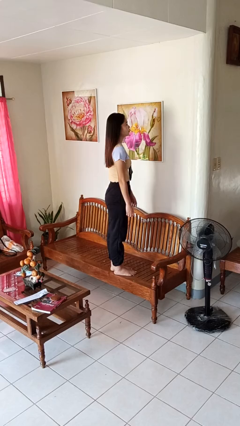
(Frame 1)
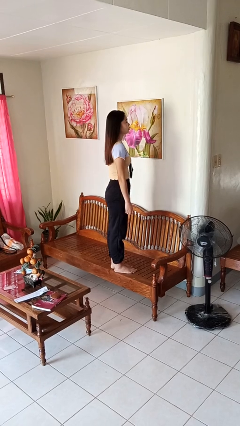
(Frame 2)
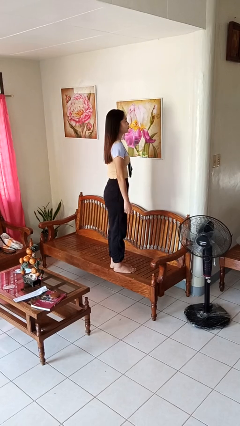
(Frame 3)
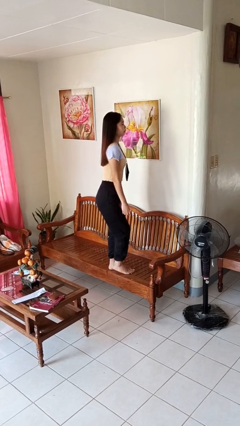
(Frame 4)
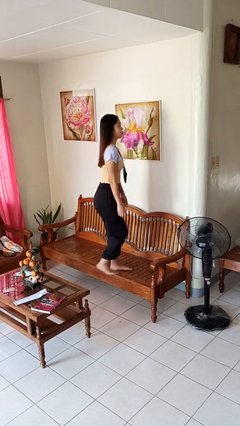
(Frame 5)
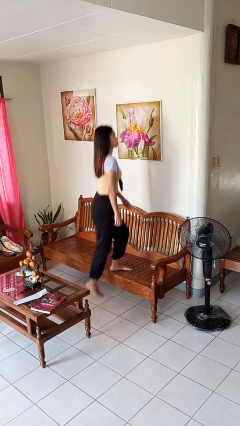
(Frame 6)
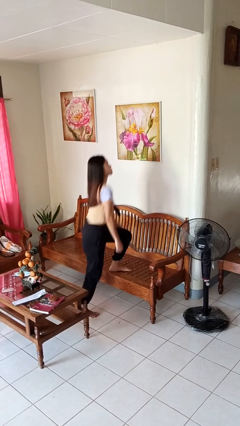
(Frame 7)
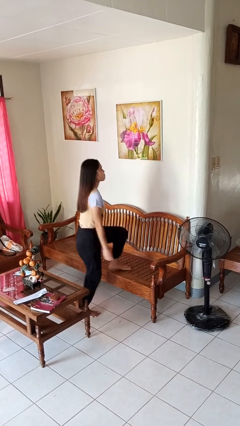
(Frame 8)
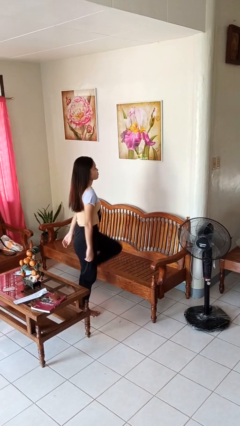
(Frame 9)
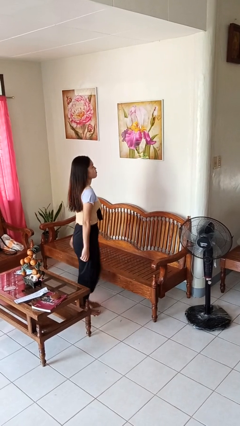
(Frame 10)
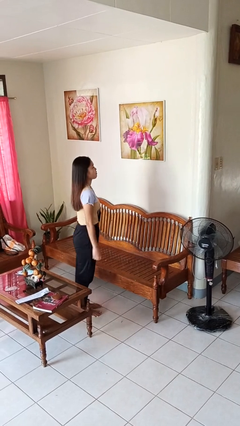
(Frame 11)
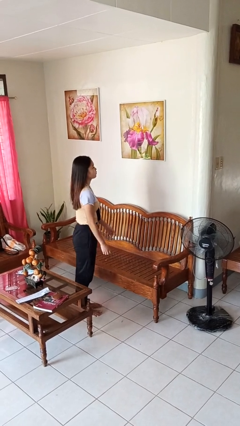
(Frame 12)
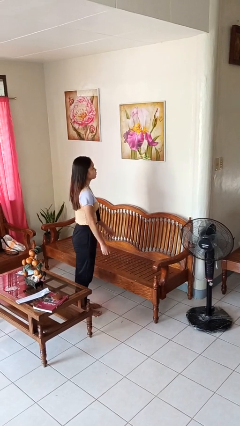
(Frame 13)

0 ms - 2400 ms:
person climbs off chair

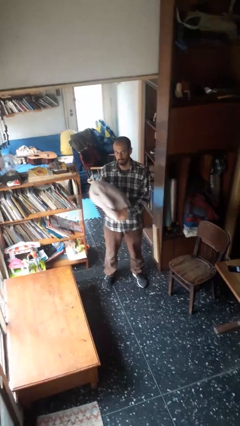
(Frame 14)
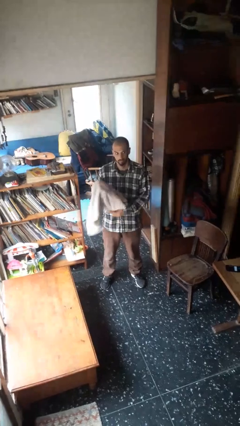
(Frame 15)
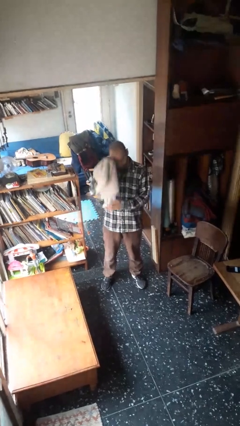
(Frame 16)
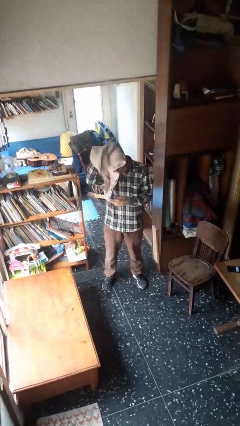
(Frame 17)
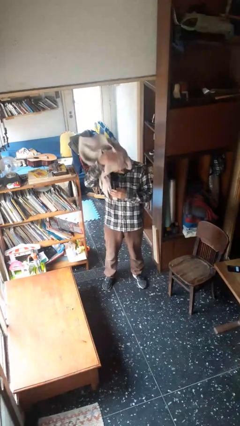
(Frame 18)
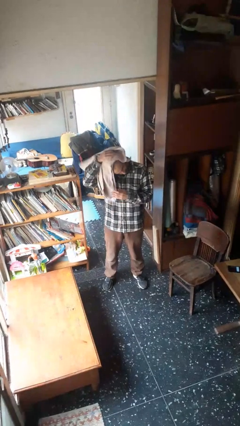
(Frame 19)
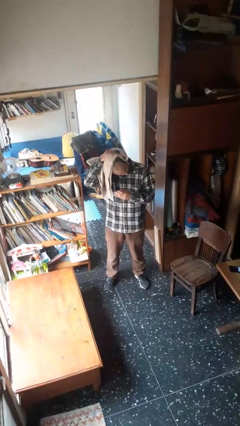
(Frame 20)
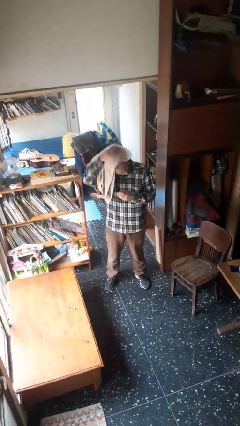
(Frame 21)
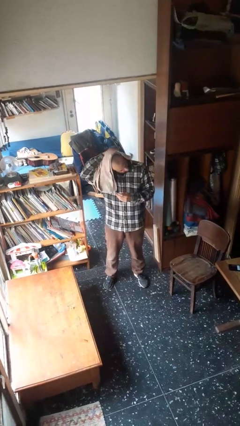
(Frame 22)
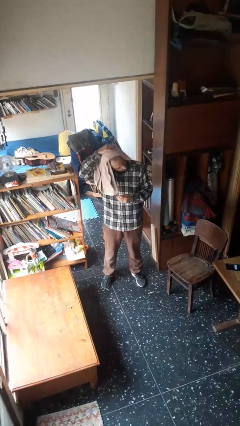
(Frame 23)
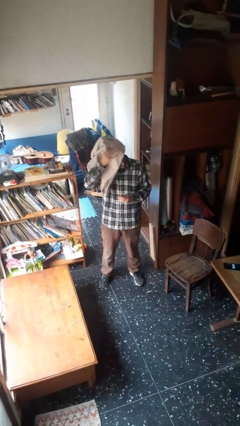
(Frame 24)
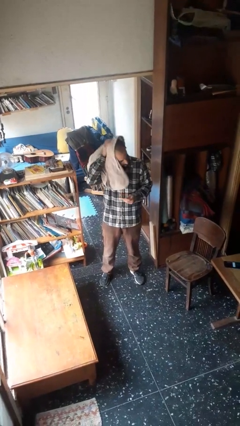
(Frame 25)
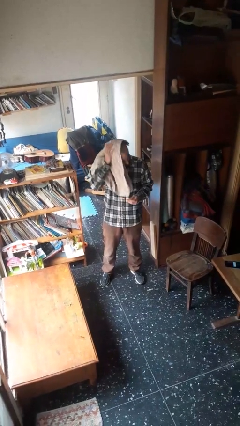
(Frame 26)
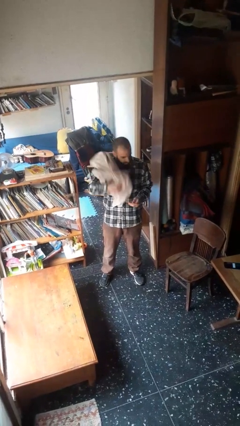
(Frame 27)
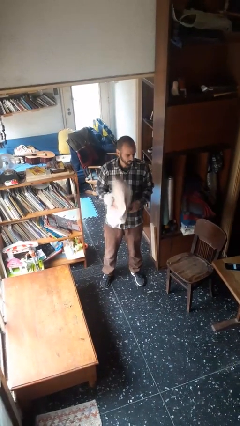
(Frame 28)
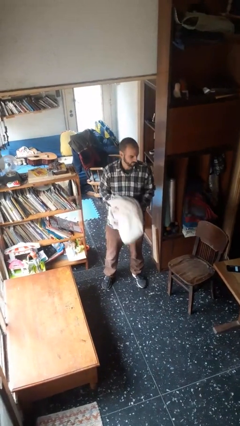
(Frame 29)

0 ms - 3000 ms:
person dries hair with towel

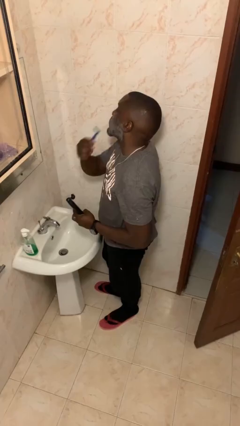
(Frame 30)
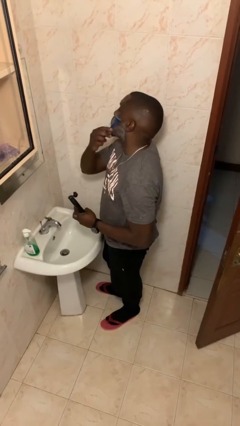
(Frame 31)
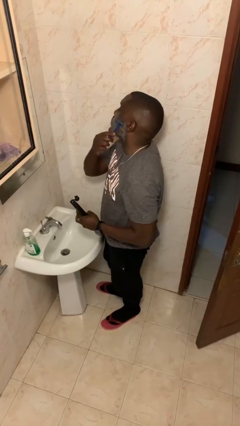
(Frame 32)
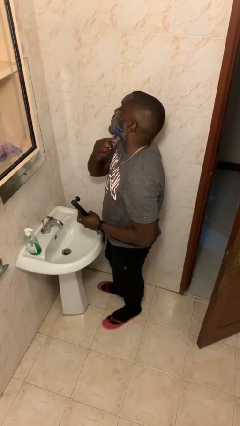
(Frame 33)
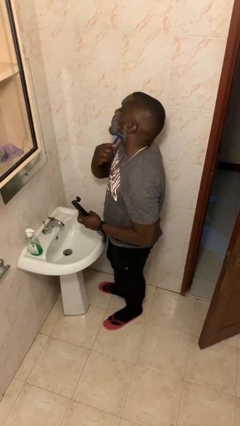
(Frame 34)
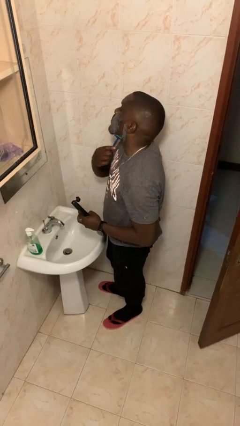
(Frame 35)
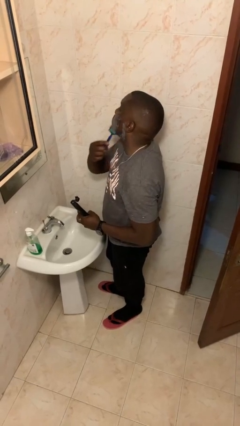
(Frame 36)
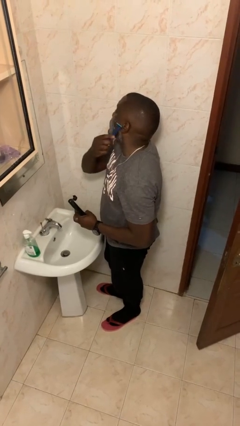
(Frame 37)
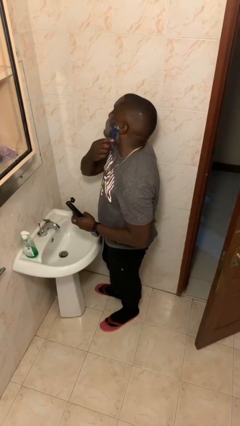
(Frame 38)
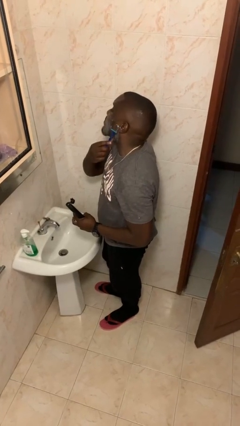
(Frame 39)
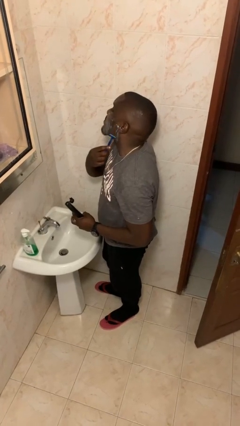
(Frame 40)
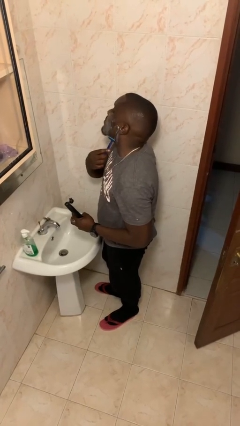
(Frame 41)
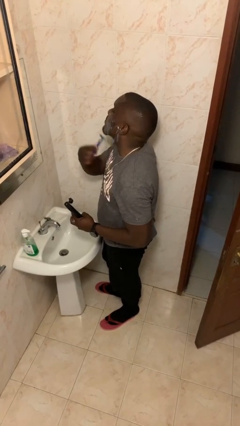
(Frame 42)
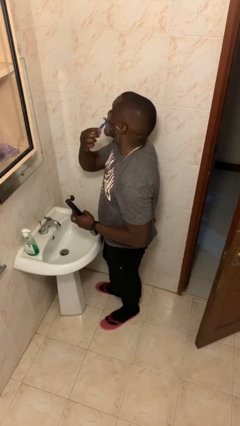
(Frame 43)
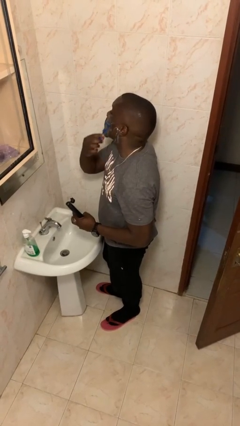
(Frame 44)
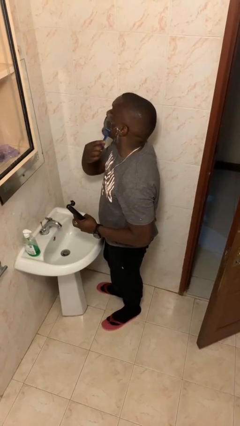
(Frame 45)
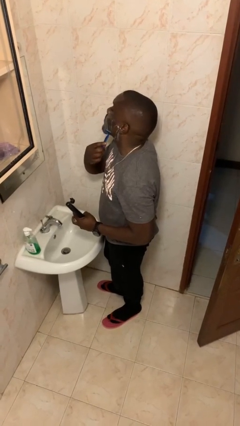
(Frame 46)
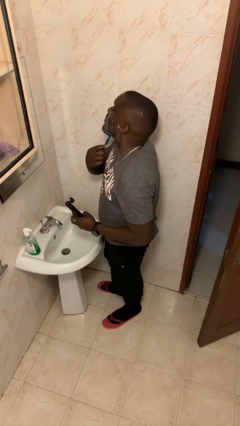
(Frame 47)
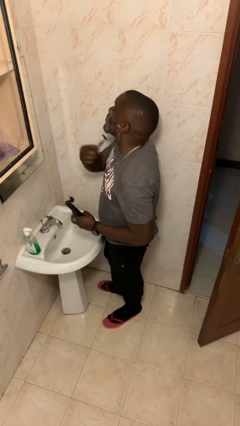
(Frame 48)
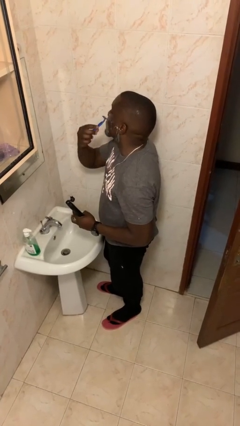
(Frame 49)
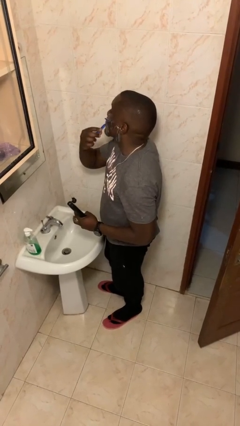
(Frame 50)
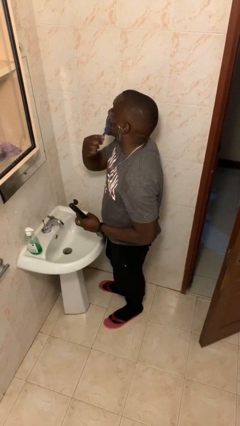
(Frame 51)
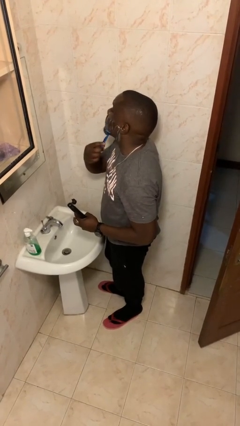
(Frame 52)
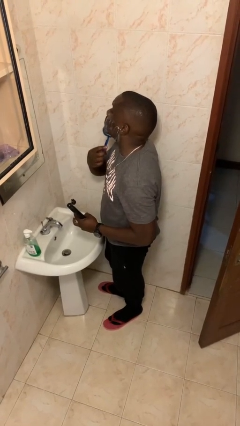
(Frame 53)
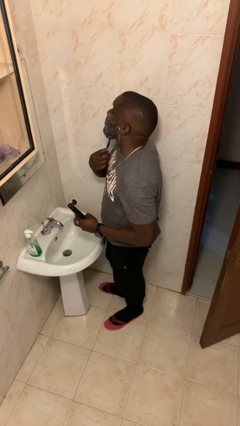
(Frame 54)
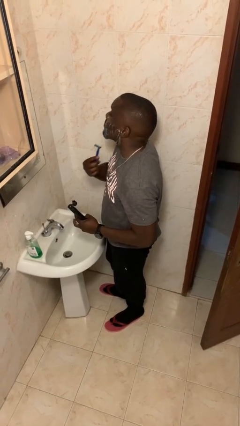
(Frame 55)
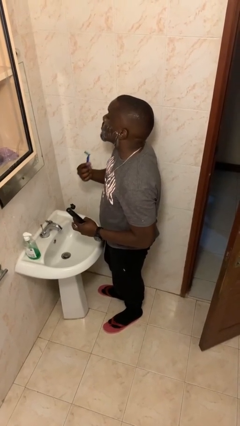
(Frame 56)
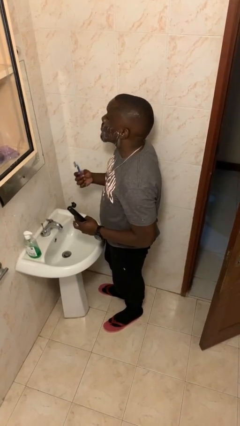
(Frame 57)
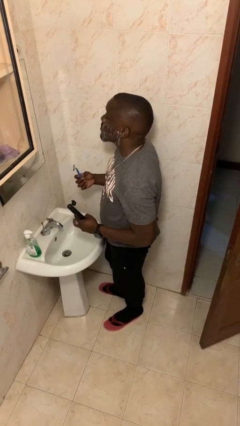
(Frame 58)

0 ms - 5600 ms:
person shaves face

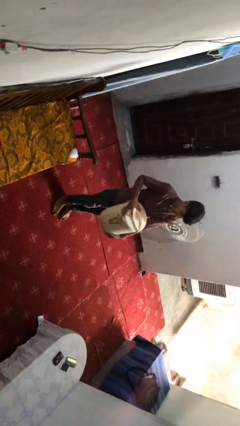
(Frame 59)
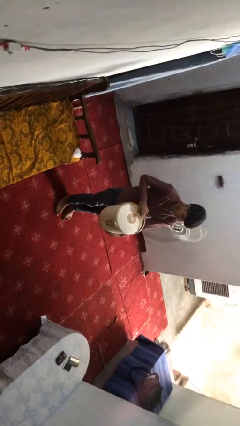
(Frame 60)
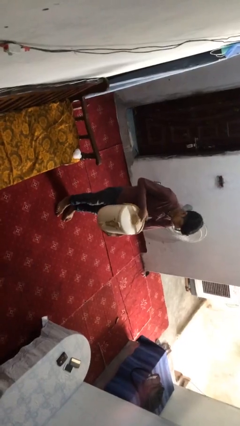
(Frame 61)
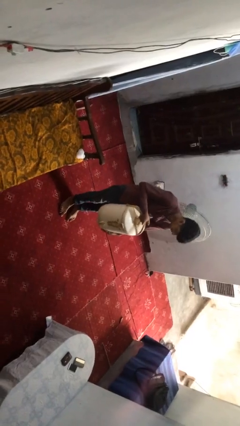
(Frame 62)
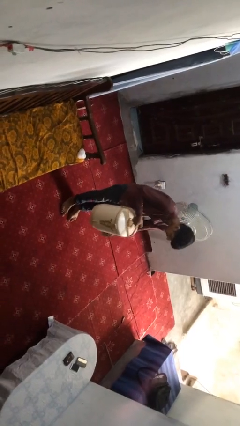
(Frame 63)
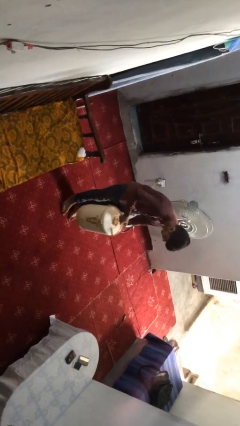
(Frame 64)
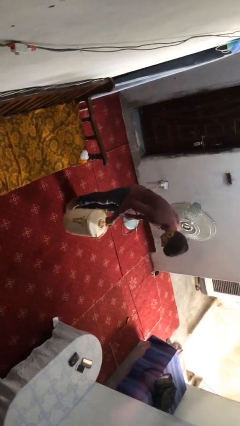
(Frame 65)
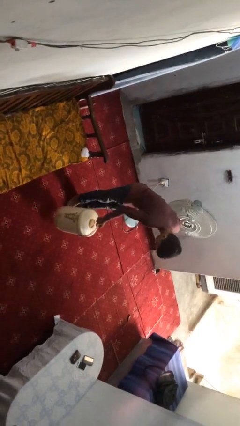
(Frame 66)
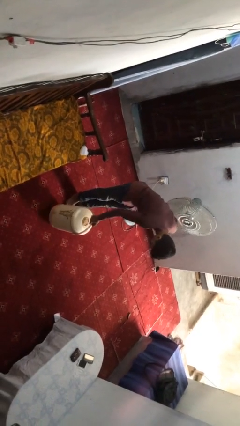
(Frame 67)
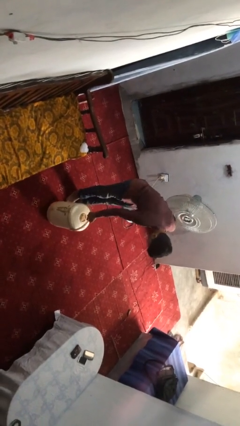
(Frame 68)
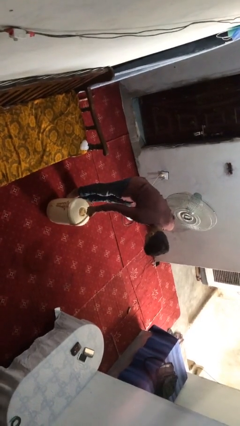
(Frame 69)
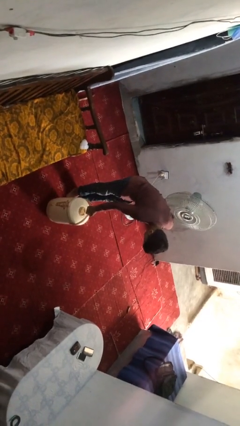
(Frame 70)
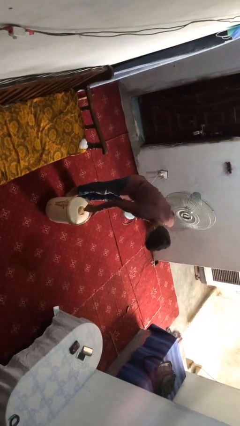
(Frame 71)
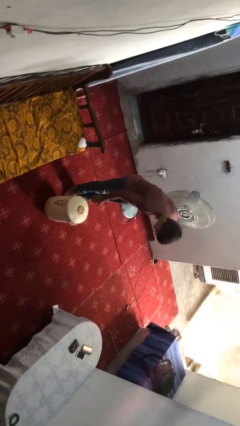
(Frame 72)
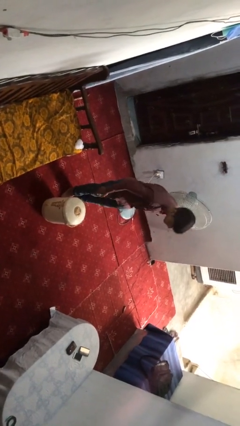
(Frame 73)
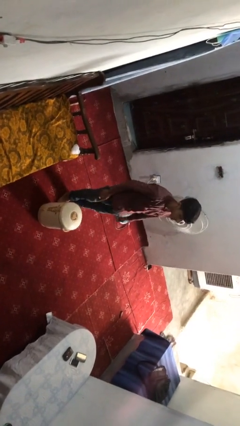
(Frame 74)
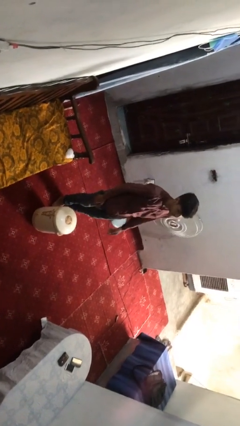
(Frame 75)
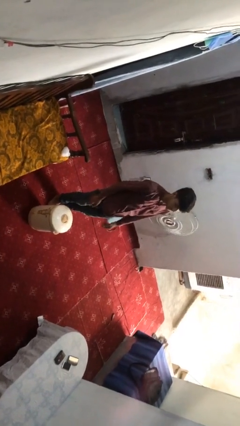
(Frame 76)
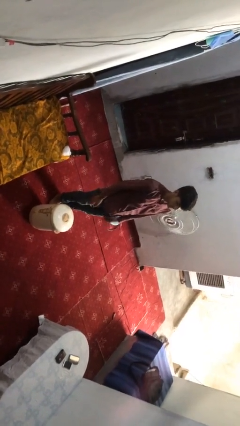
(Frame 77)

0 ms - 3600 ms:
person puts down object on floor

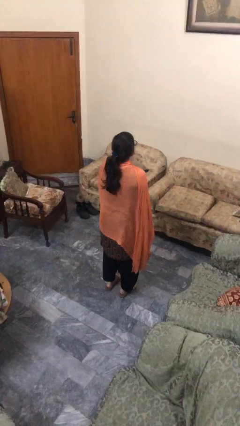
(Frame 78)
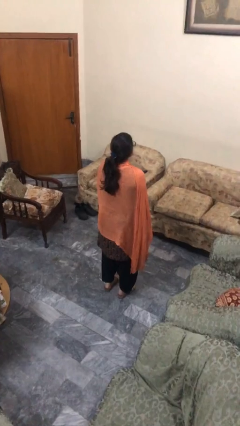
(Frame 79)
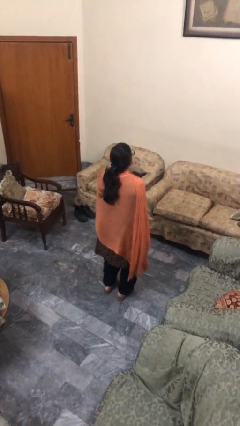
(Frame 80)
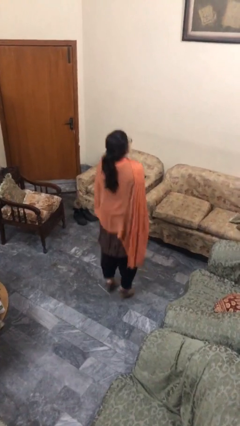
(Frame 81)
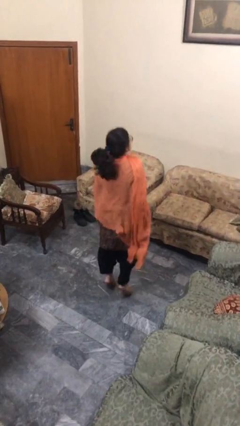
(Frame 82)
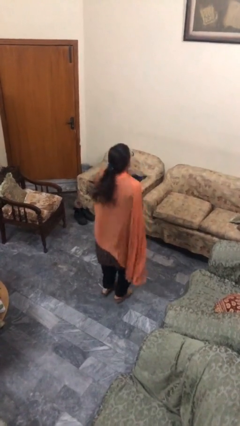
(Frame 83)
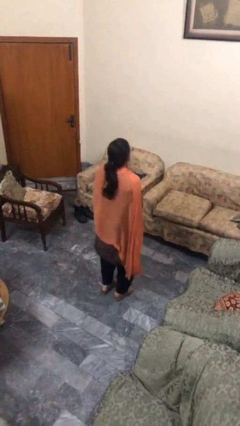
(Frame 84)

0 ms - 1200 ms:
person jumps

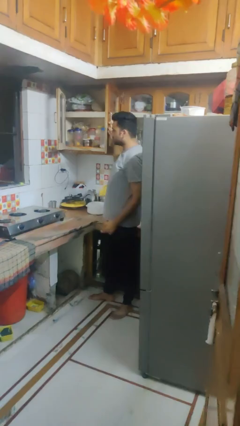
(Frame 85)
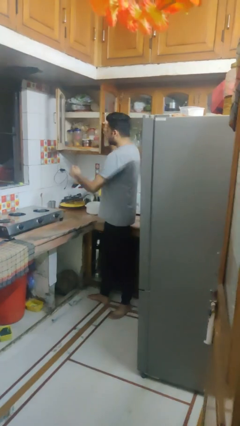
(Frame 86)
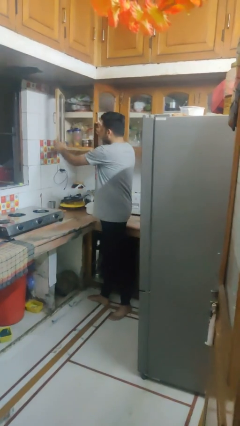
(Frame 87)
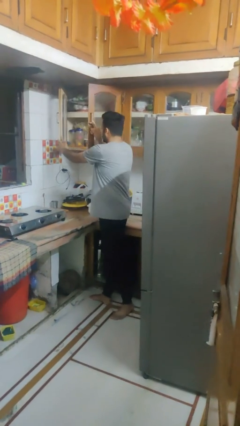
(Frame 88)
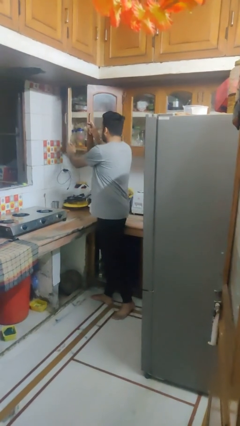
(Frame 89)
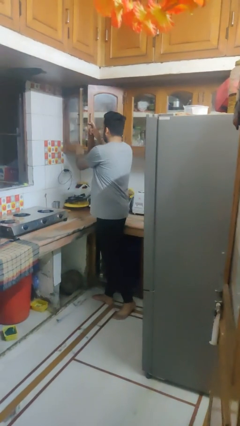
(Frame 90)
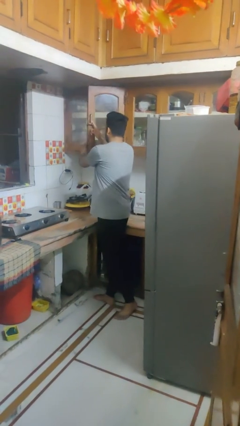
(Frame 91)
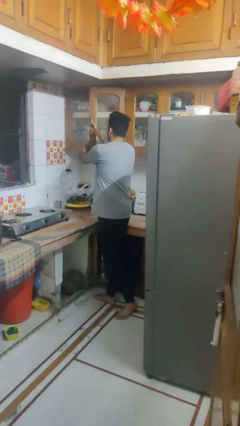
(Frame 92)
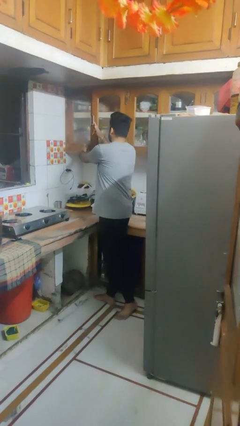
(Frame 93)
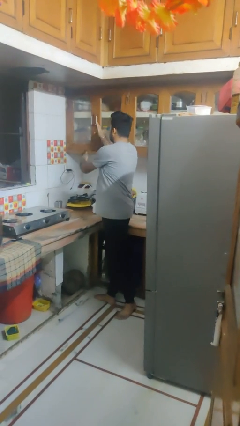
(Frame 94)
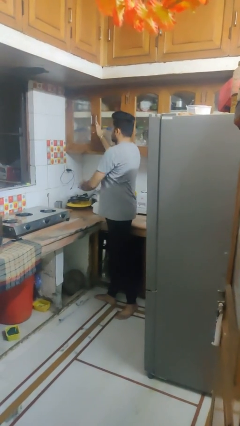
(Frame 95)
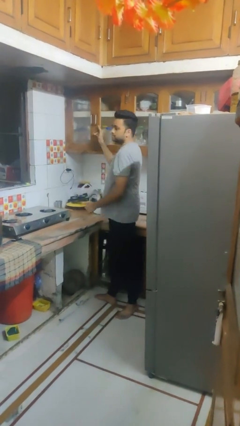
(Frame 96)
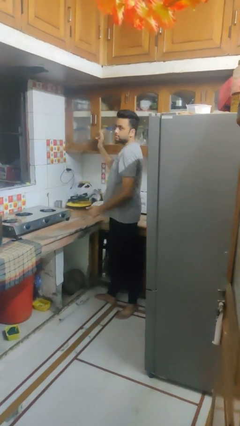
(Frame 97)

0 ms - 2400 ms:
person closes cabinet
